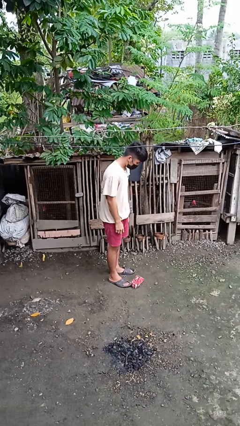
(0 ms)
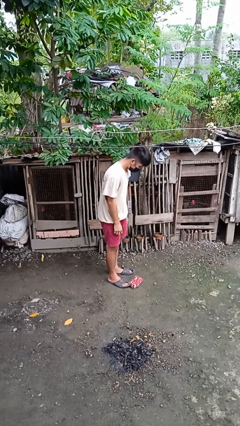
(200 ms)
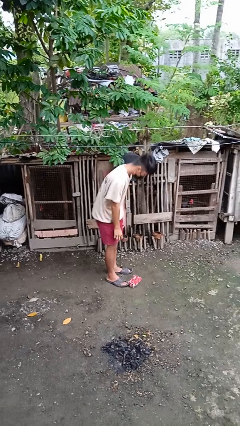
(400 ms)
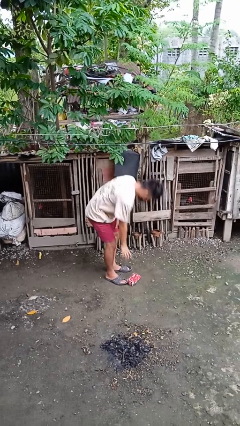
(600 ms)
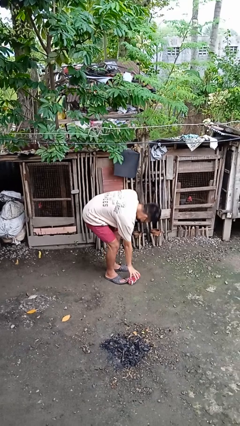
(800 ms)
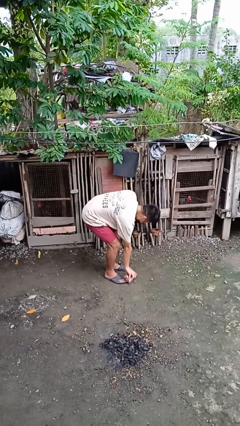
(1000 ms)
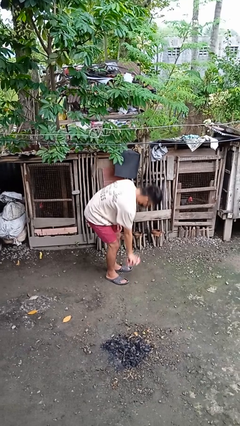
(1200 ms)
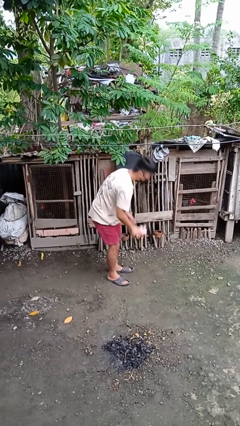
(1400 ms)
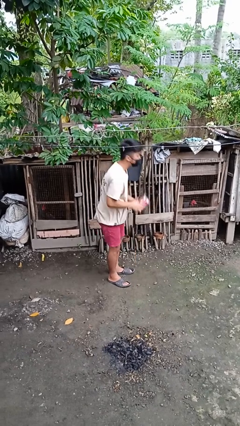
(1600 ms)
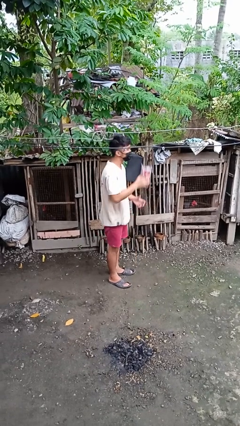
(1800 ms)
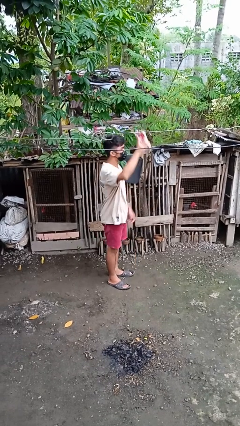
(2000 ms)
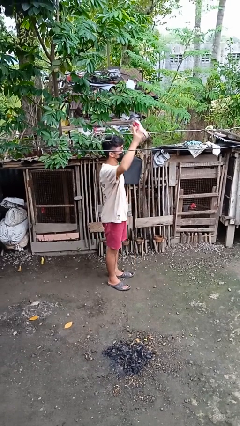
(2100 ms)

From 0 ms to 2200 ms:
person picks up object from floor

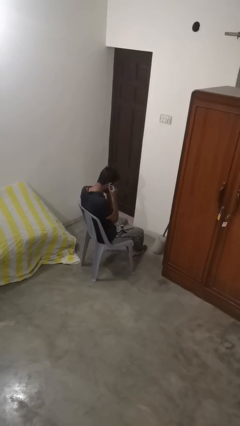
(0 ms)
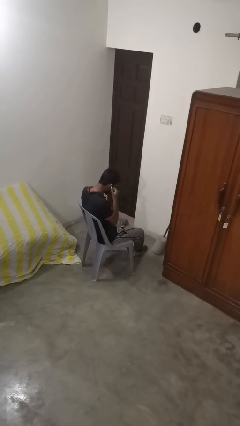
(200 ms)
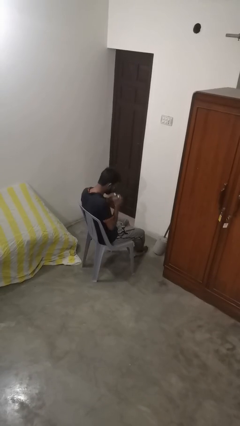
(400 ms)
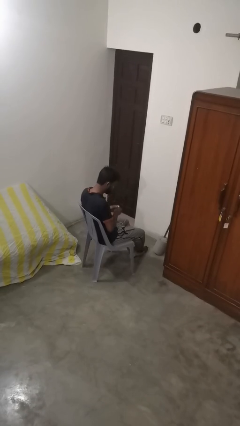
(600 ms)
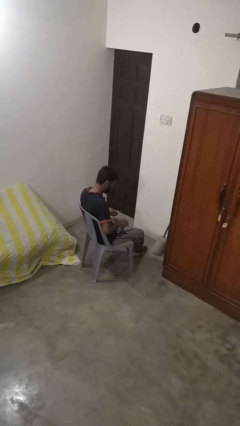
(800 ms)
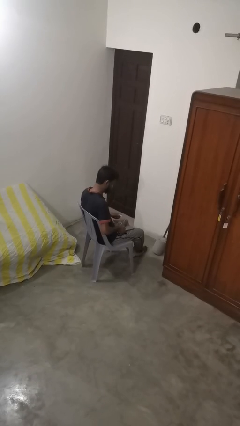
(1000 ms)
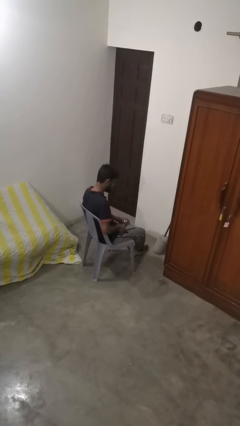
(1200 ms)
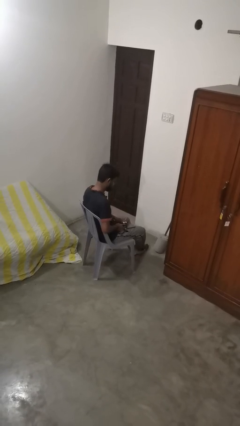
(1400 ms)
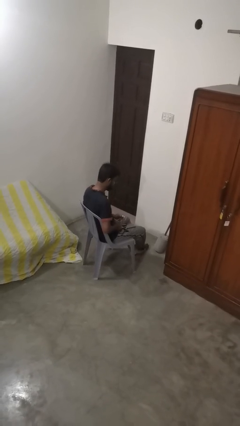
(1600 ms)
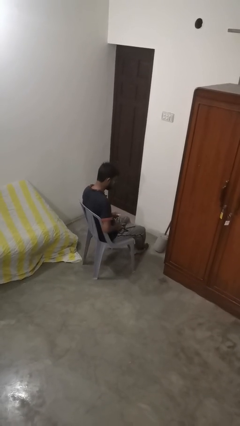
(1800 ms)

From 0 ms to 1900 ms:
person takes off headphones

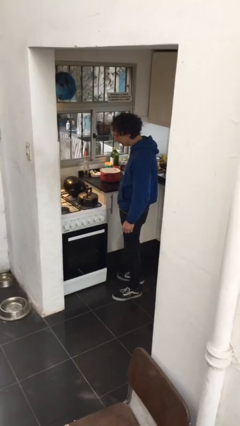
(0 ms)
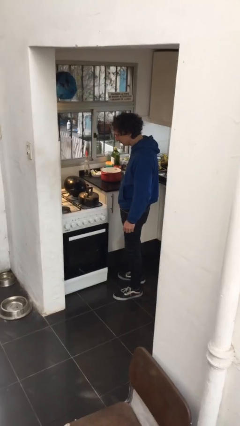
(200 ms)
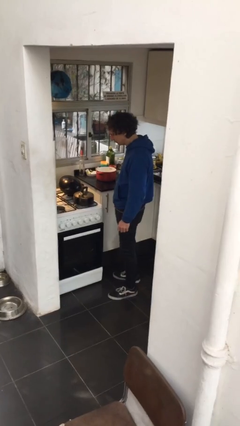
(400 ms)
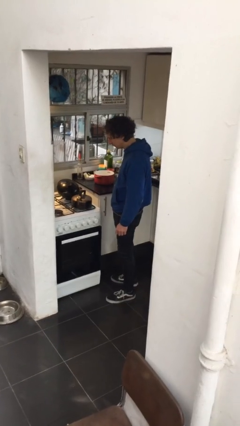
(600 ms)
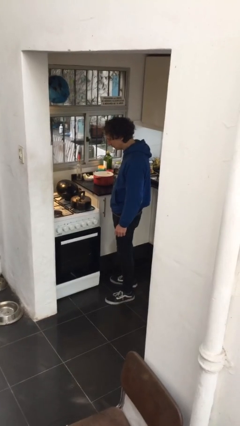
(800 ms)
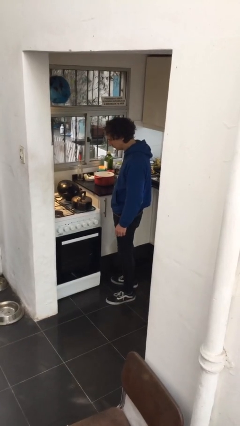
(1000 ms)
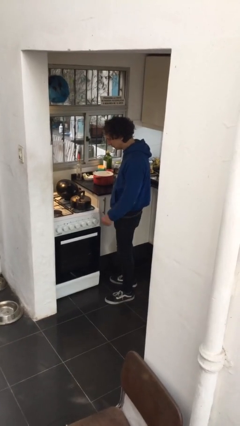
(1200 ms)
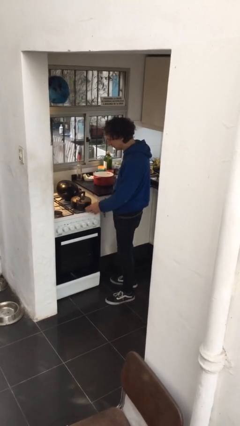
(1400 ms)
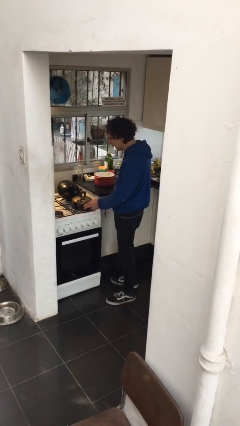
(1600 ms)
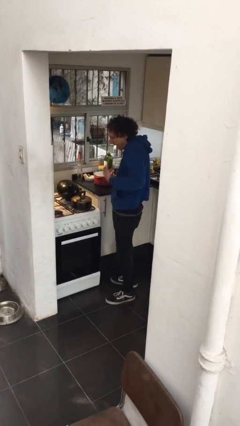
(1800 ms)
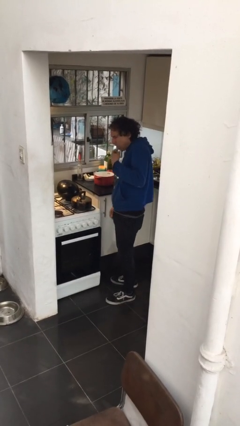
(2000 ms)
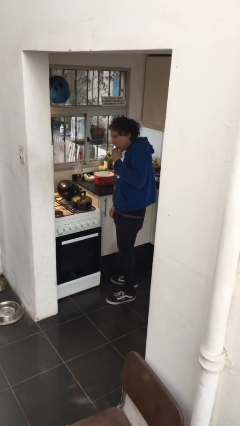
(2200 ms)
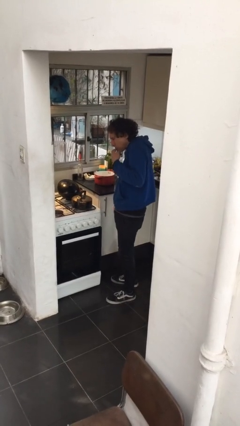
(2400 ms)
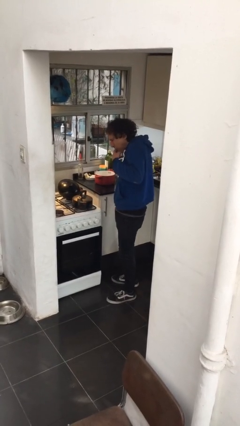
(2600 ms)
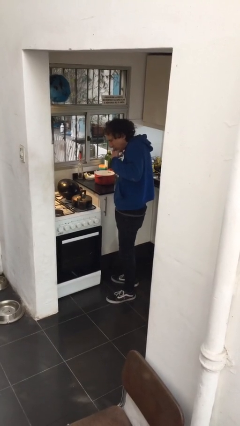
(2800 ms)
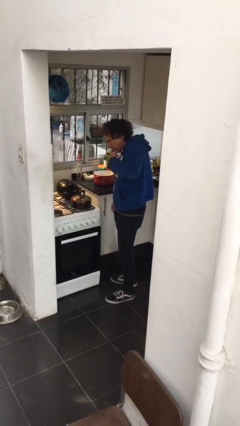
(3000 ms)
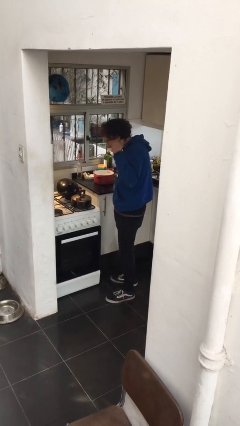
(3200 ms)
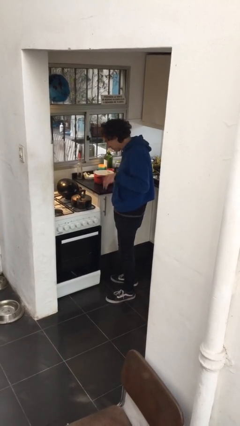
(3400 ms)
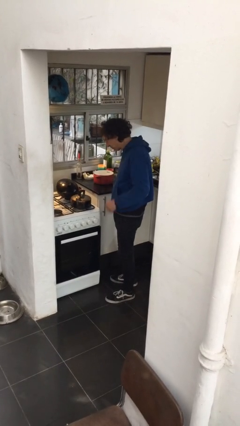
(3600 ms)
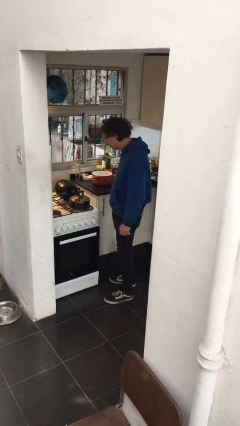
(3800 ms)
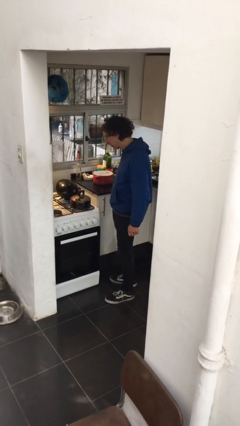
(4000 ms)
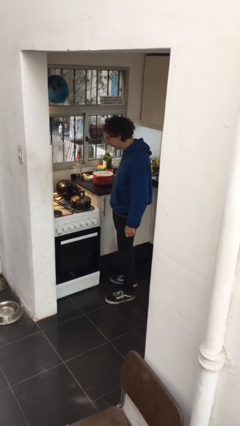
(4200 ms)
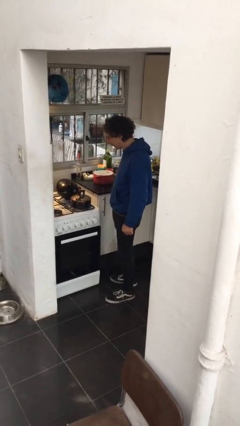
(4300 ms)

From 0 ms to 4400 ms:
person burns hand

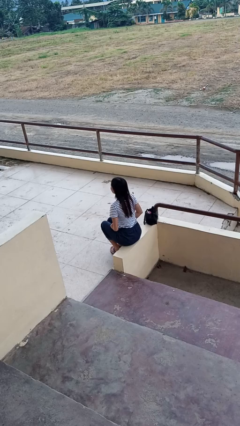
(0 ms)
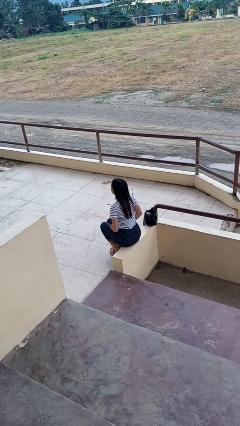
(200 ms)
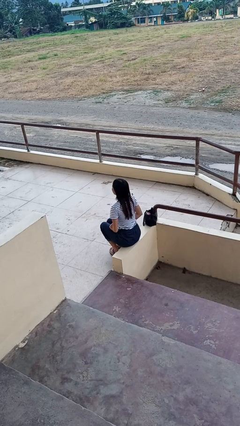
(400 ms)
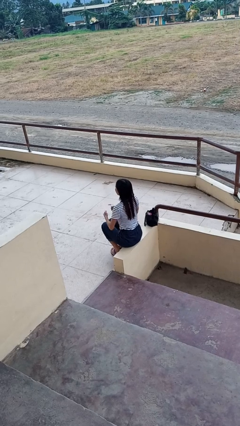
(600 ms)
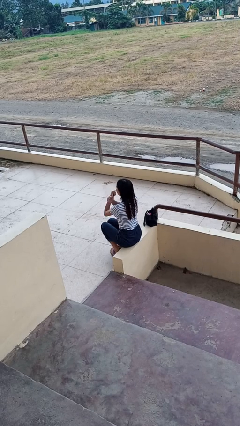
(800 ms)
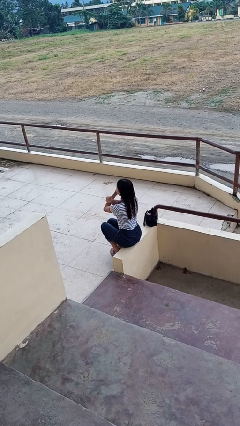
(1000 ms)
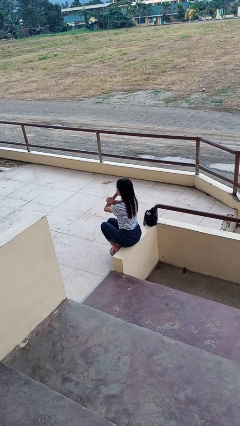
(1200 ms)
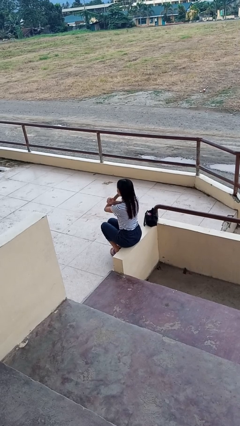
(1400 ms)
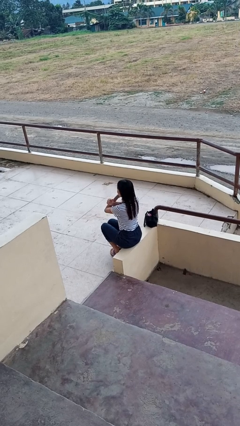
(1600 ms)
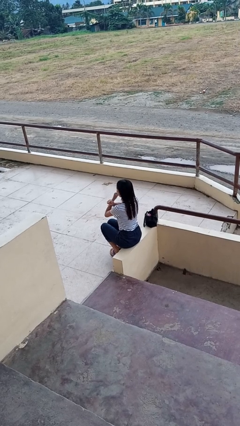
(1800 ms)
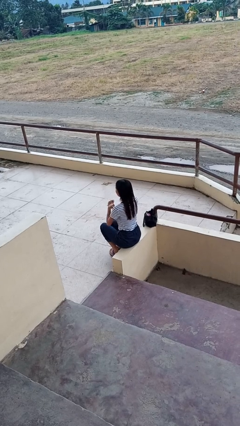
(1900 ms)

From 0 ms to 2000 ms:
person gestures arms x

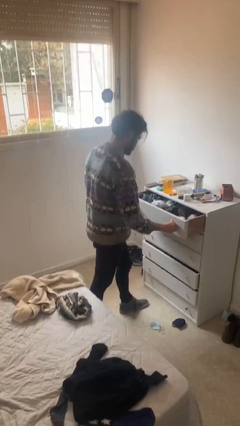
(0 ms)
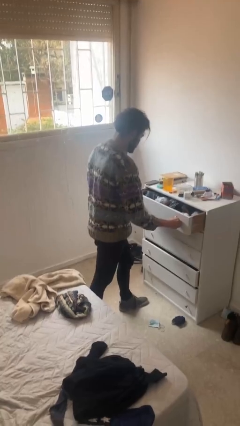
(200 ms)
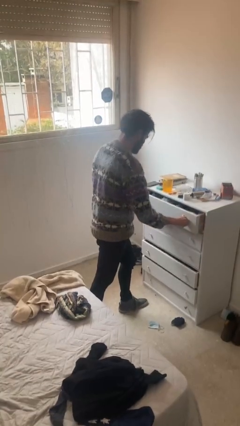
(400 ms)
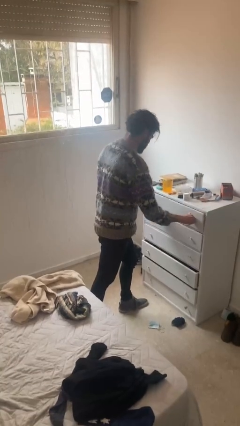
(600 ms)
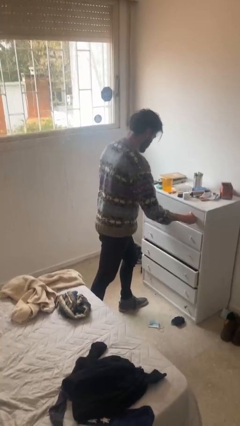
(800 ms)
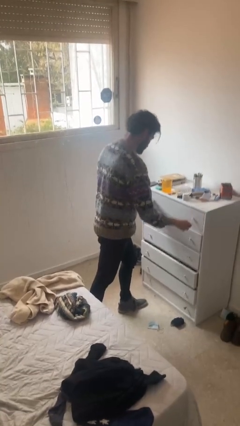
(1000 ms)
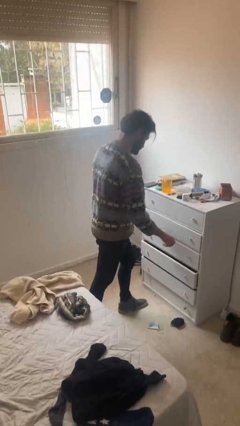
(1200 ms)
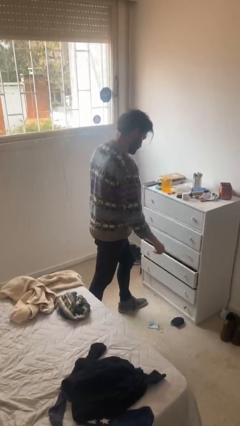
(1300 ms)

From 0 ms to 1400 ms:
person closes dresser drawer

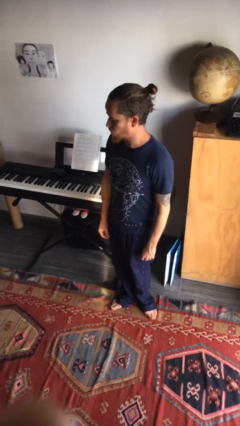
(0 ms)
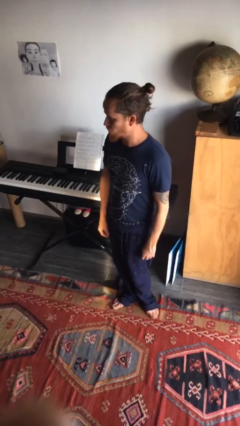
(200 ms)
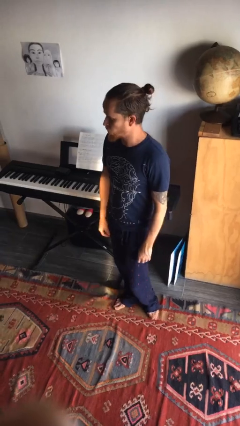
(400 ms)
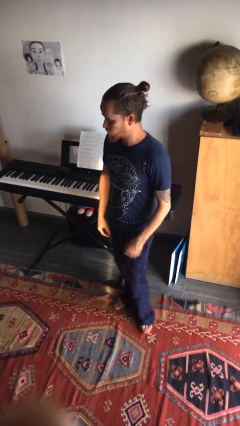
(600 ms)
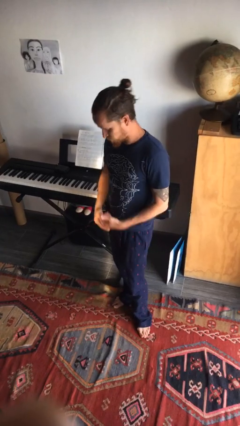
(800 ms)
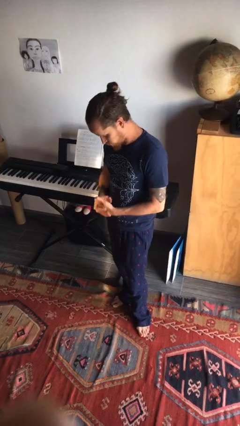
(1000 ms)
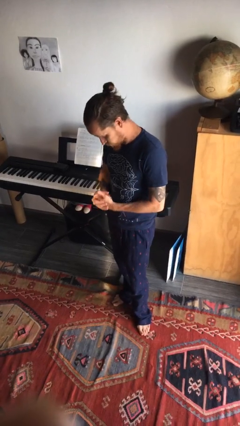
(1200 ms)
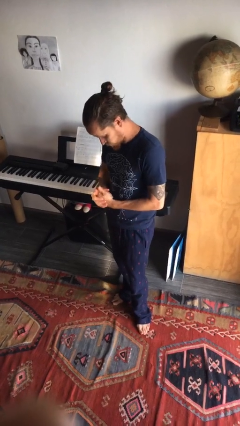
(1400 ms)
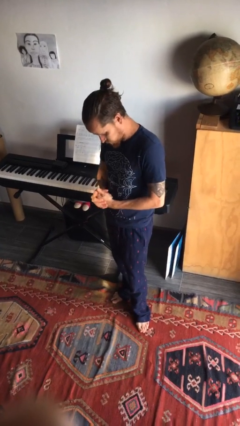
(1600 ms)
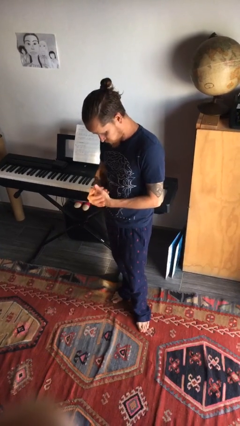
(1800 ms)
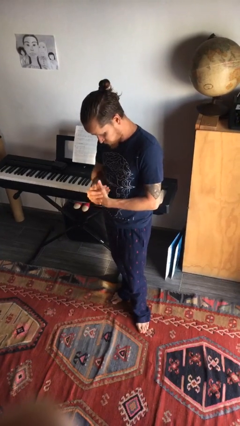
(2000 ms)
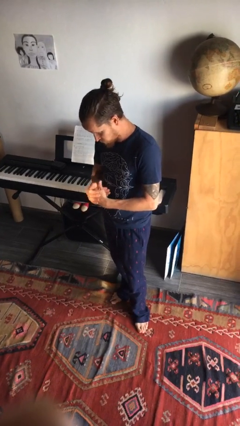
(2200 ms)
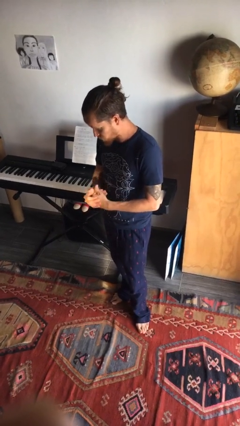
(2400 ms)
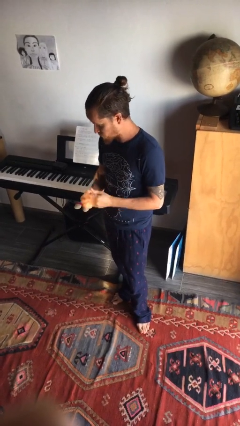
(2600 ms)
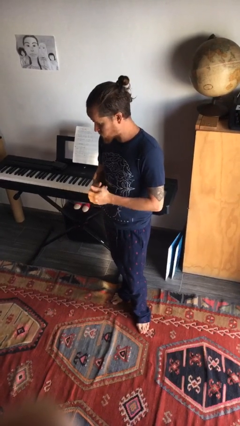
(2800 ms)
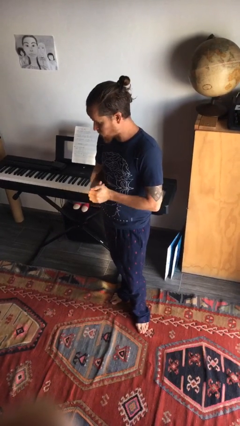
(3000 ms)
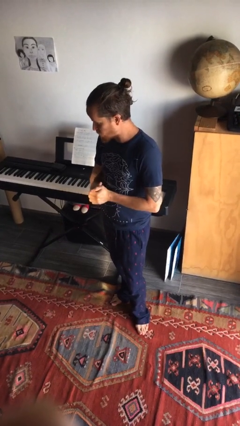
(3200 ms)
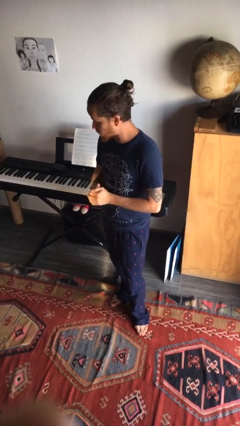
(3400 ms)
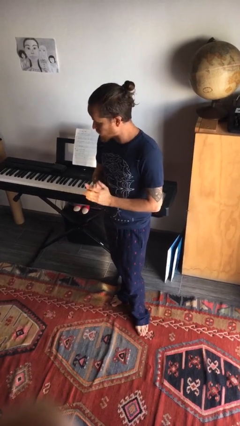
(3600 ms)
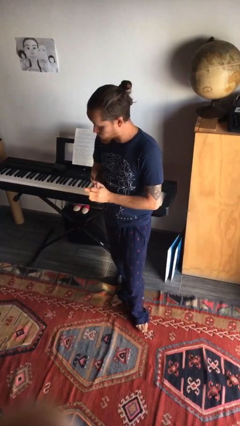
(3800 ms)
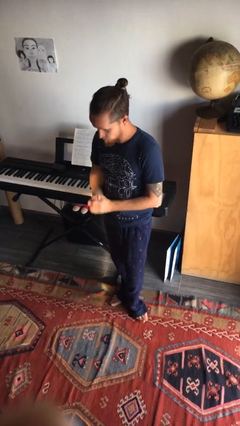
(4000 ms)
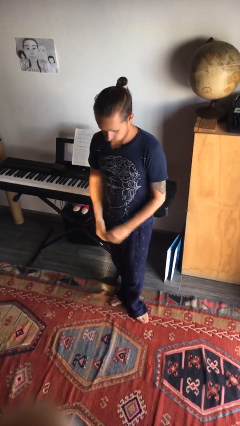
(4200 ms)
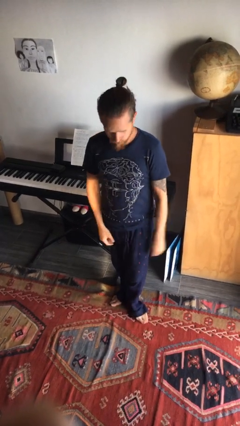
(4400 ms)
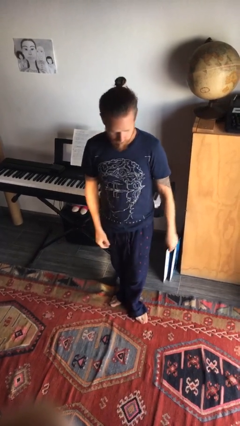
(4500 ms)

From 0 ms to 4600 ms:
person cracks knuckles

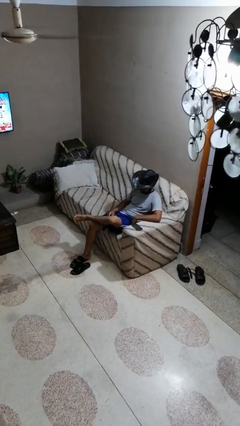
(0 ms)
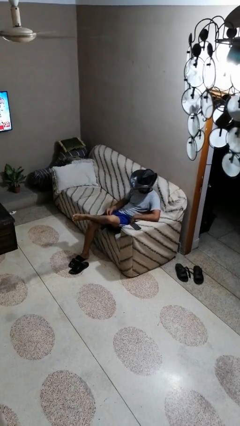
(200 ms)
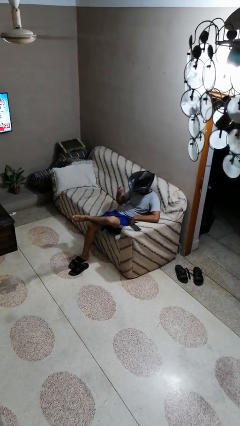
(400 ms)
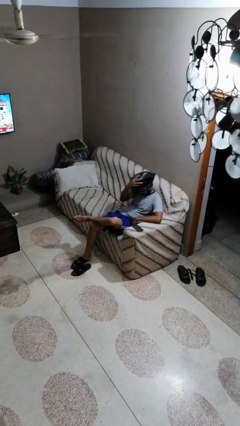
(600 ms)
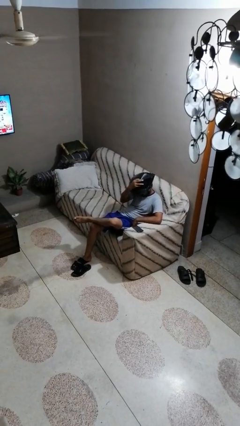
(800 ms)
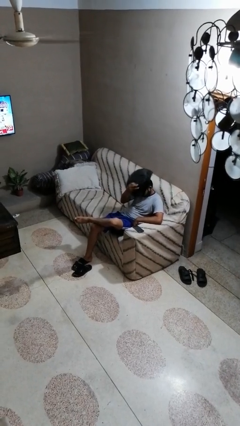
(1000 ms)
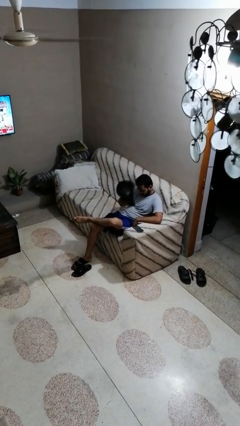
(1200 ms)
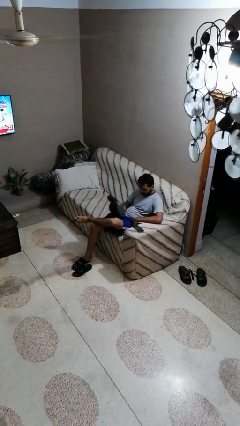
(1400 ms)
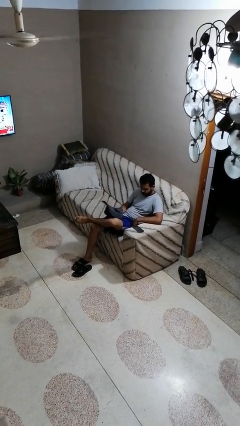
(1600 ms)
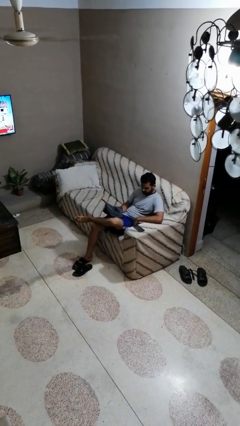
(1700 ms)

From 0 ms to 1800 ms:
person takes off hat
